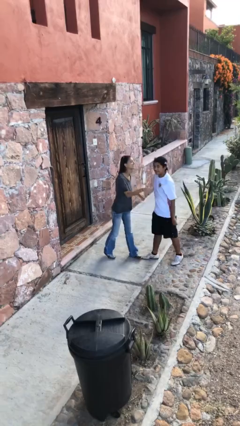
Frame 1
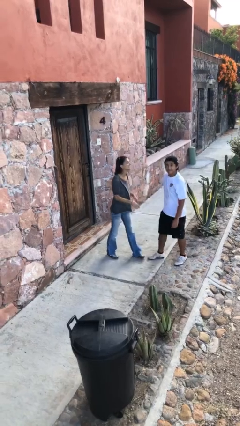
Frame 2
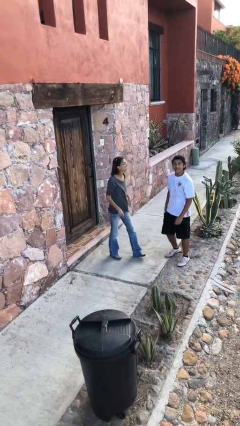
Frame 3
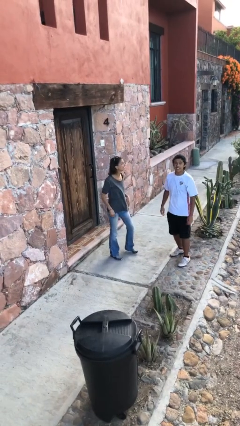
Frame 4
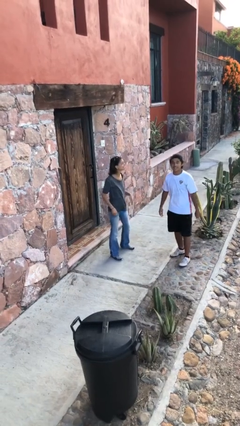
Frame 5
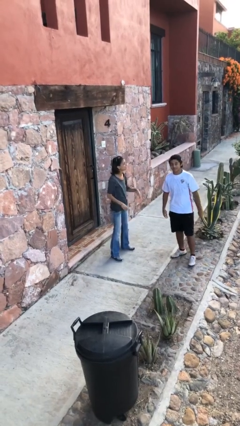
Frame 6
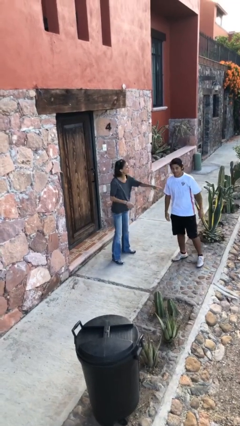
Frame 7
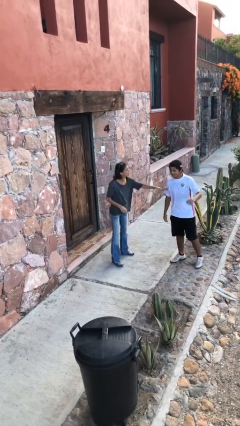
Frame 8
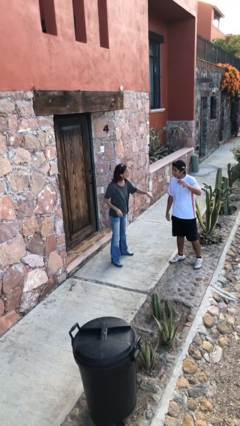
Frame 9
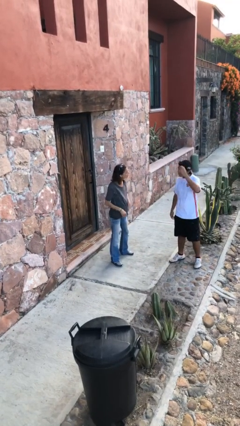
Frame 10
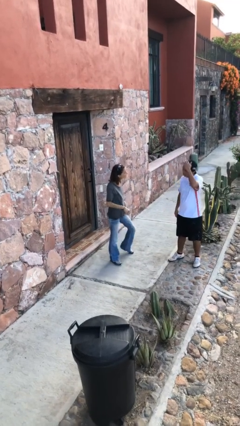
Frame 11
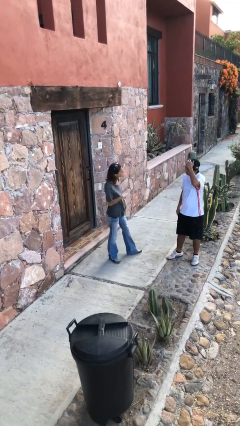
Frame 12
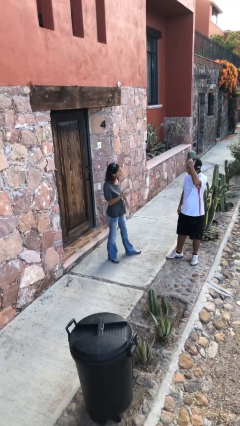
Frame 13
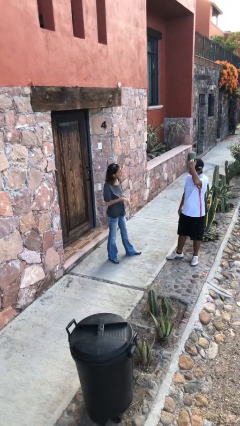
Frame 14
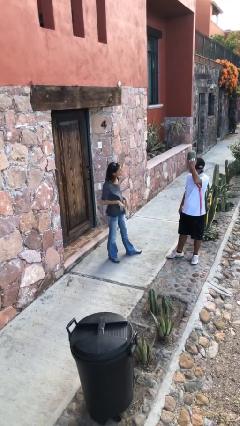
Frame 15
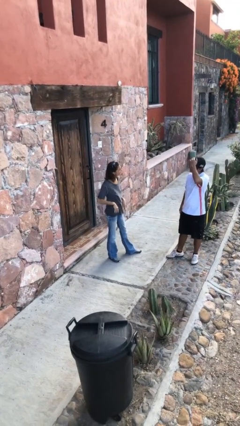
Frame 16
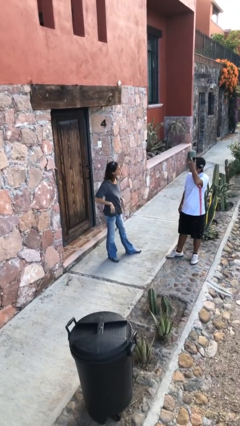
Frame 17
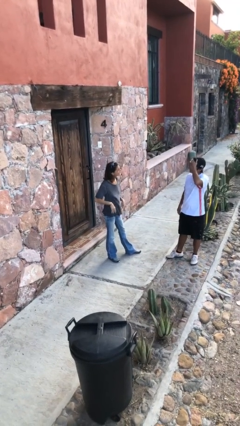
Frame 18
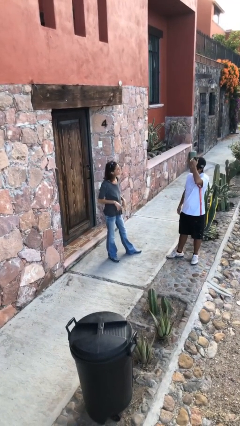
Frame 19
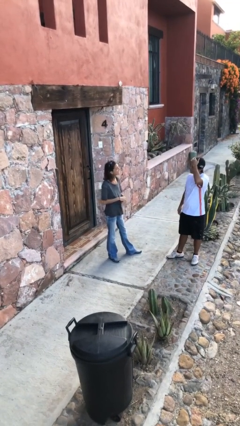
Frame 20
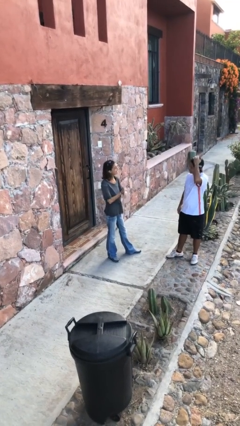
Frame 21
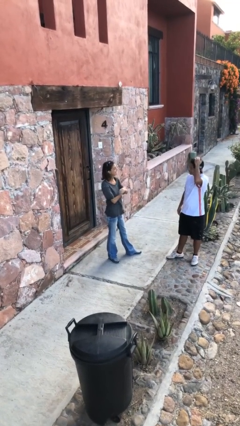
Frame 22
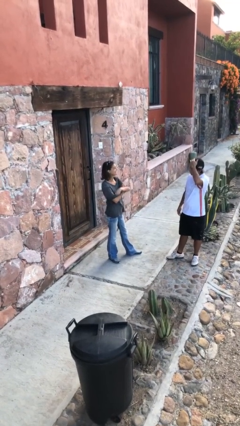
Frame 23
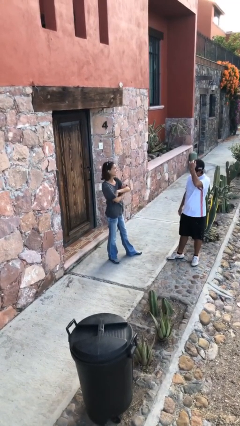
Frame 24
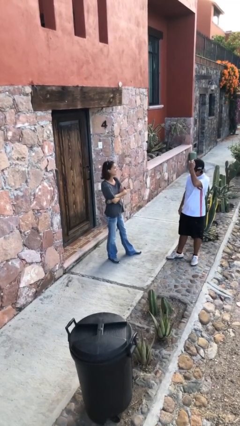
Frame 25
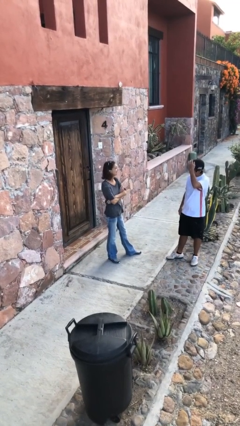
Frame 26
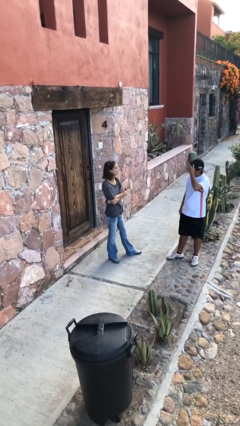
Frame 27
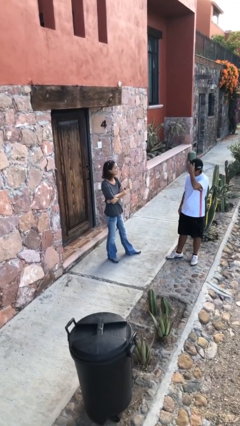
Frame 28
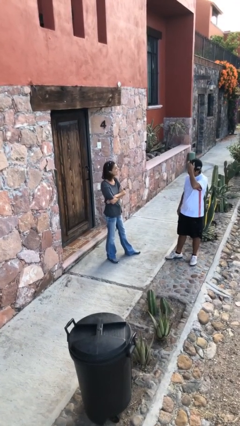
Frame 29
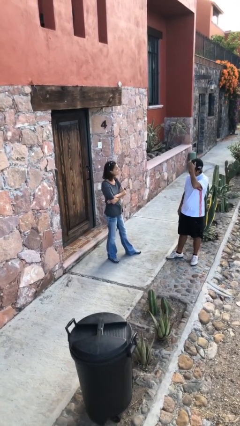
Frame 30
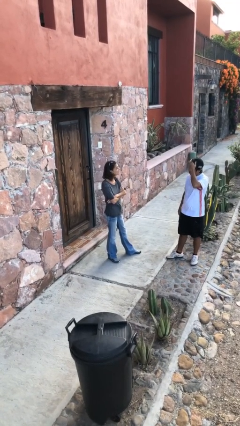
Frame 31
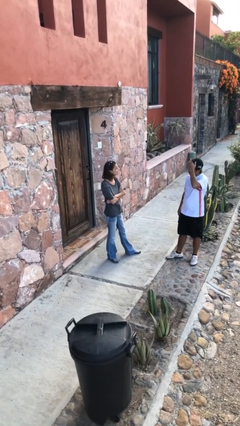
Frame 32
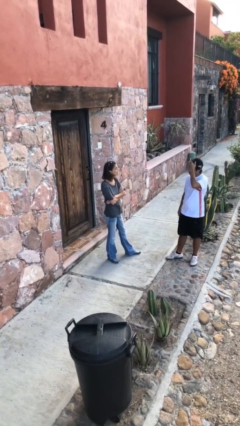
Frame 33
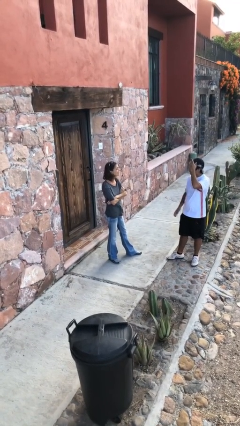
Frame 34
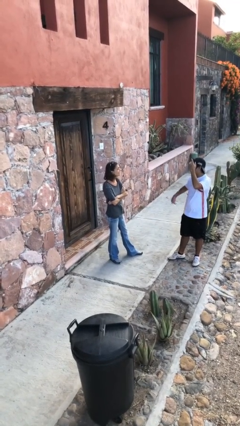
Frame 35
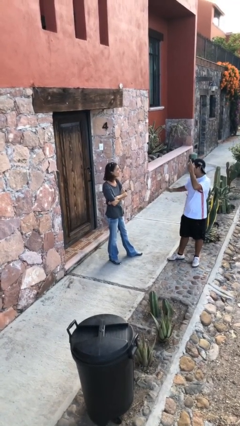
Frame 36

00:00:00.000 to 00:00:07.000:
person talks to person

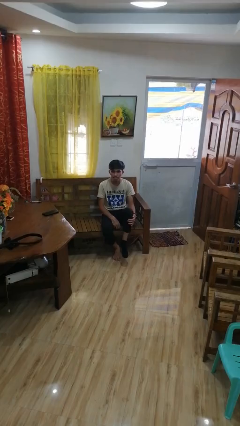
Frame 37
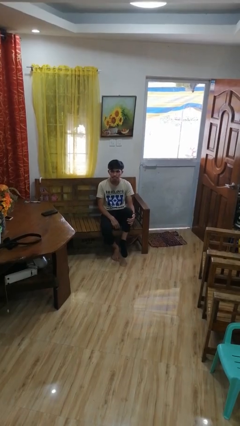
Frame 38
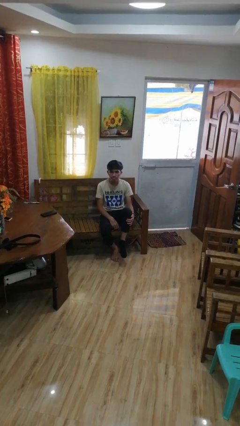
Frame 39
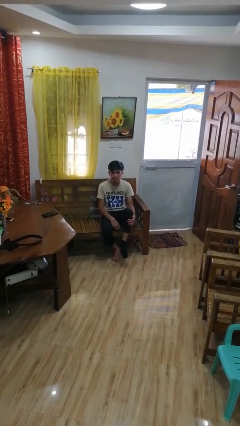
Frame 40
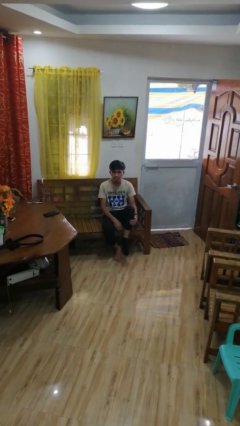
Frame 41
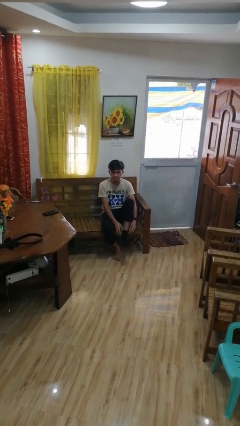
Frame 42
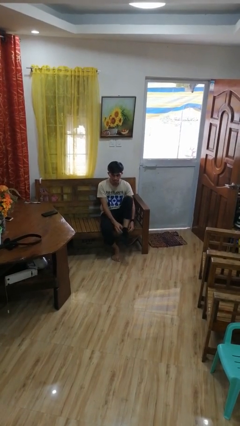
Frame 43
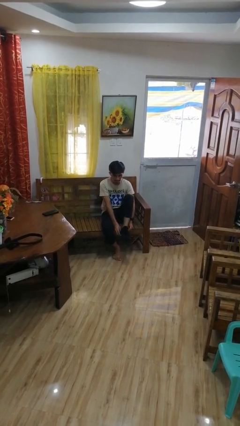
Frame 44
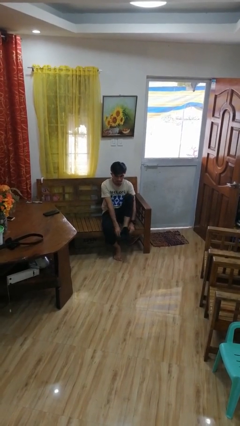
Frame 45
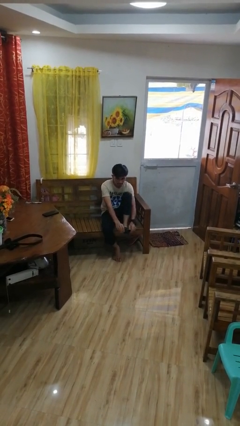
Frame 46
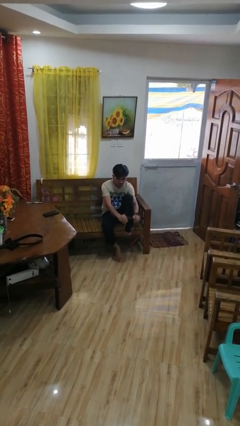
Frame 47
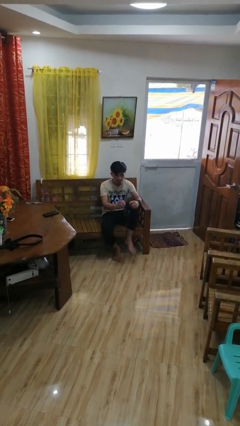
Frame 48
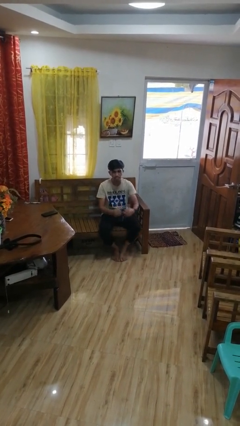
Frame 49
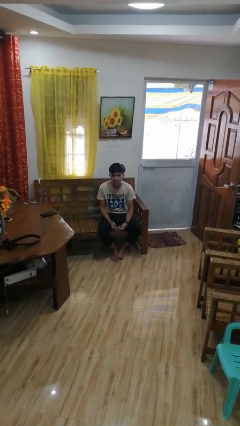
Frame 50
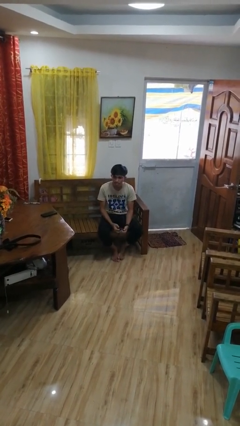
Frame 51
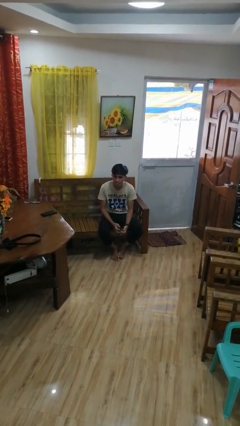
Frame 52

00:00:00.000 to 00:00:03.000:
person takes off socks

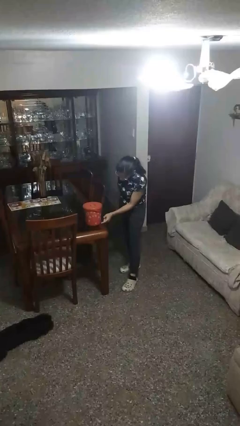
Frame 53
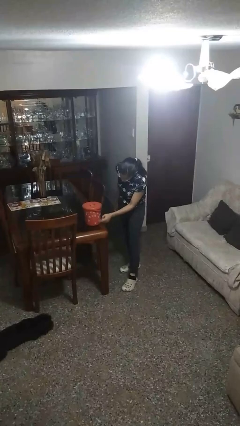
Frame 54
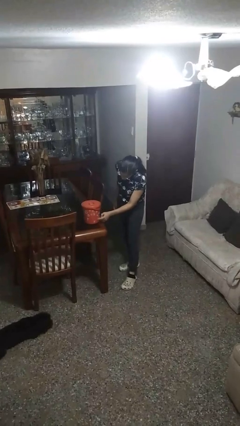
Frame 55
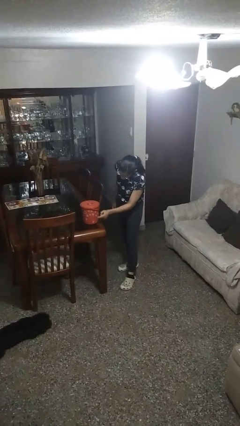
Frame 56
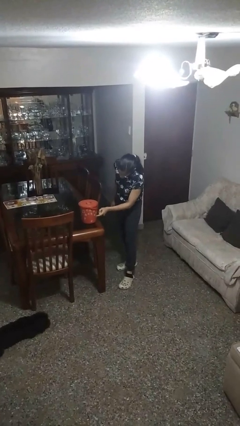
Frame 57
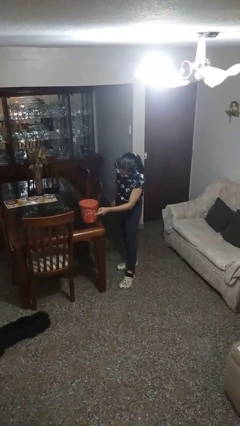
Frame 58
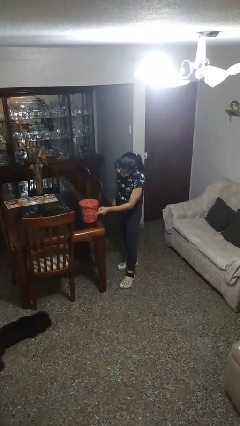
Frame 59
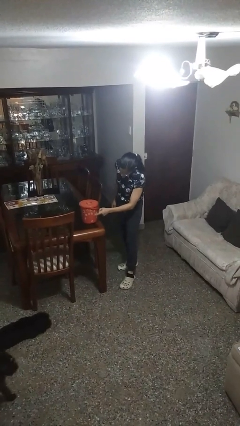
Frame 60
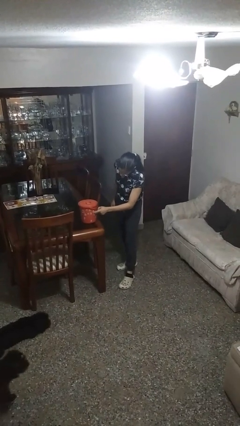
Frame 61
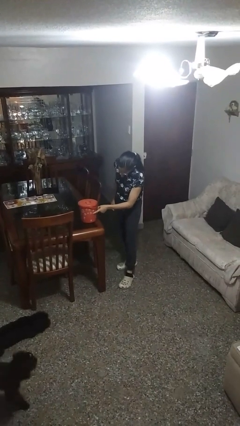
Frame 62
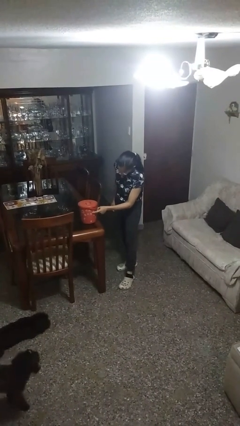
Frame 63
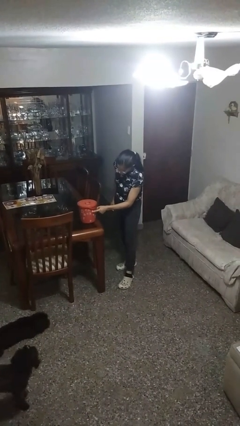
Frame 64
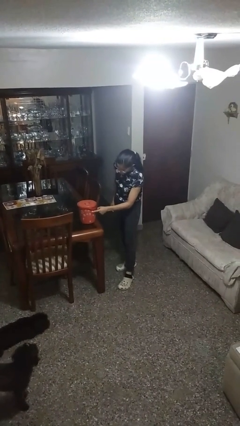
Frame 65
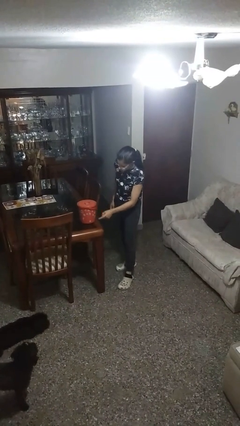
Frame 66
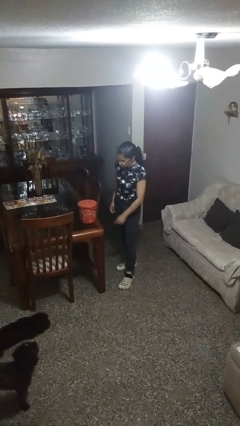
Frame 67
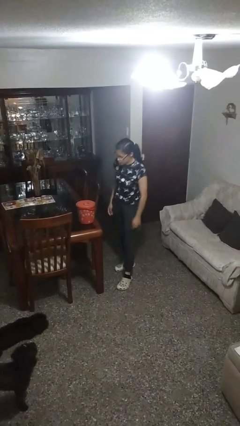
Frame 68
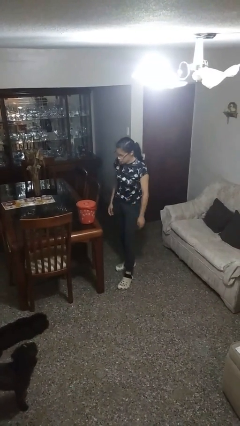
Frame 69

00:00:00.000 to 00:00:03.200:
person taps object with finger

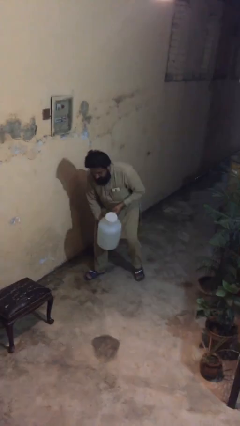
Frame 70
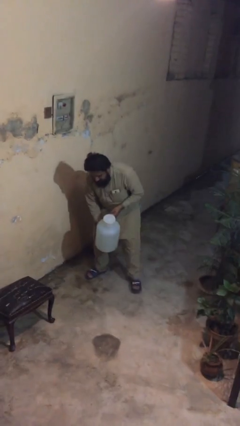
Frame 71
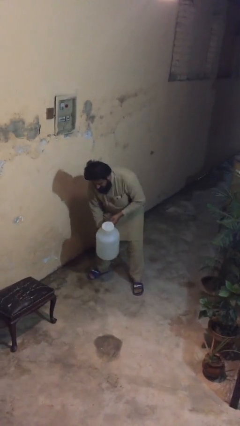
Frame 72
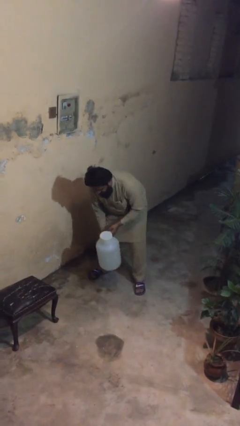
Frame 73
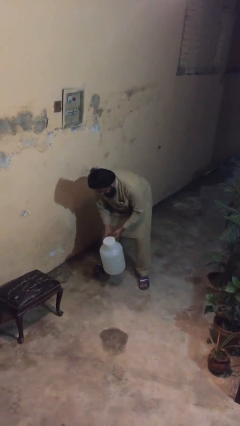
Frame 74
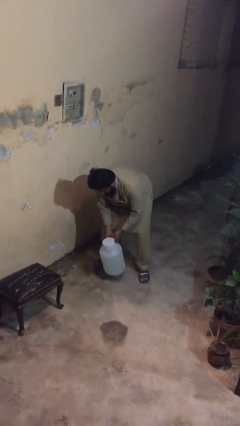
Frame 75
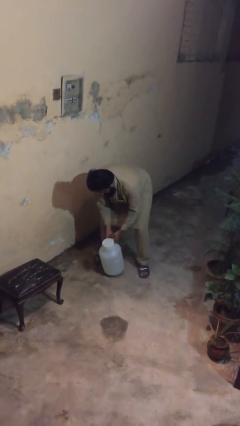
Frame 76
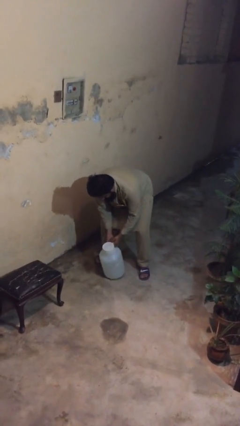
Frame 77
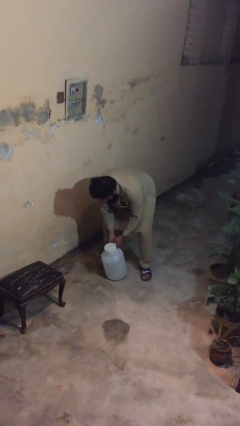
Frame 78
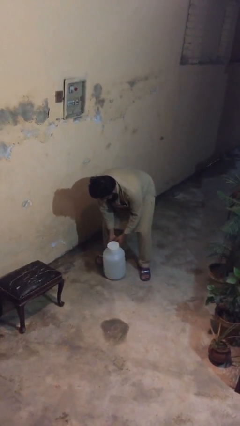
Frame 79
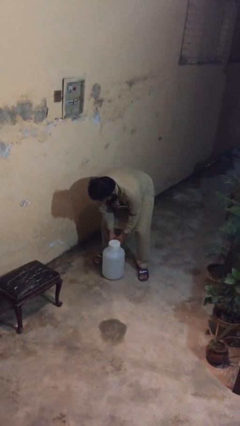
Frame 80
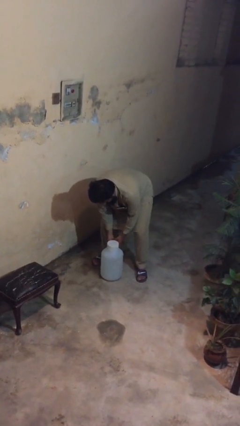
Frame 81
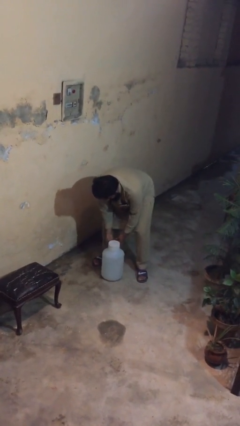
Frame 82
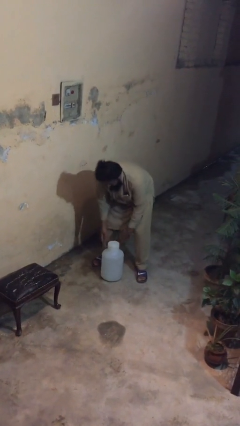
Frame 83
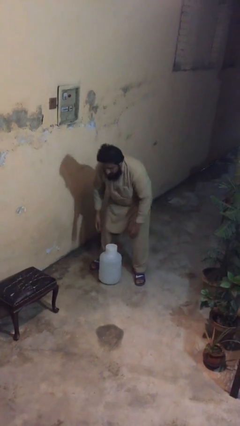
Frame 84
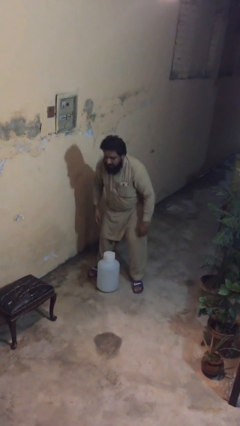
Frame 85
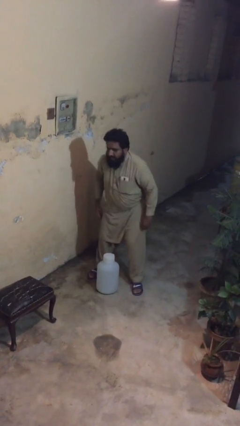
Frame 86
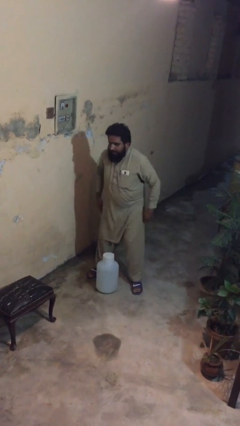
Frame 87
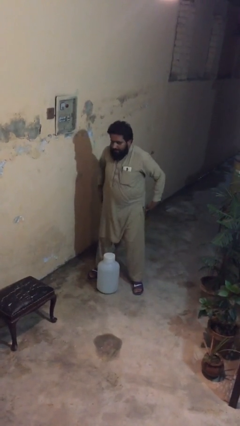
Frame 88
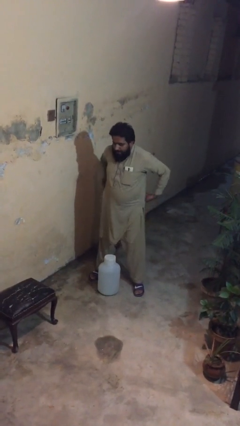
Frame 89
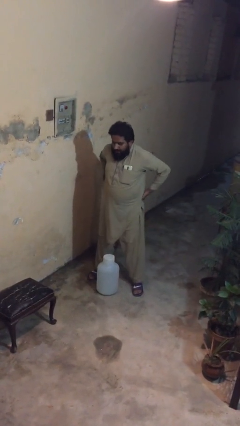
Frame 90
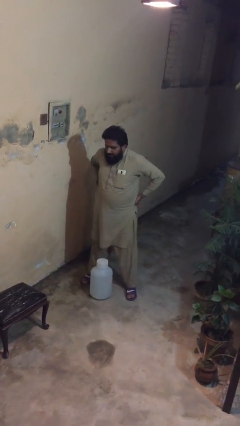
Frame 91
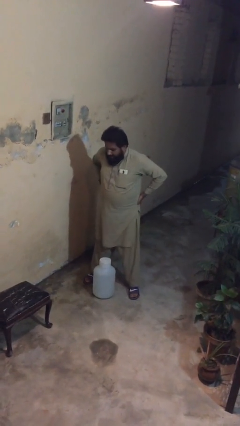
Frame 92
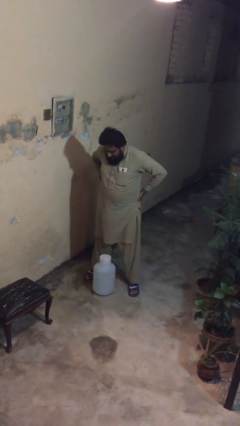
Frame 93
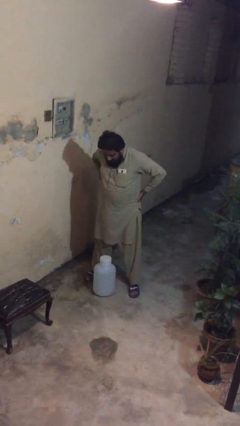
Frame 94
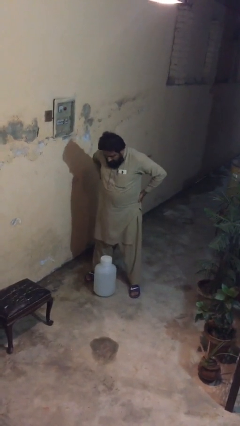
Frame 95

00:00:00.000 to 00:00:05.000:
person puts down object on floor
